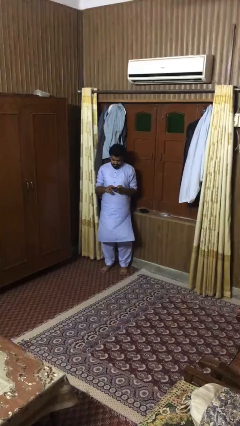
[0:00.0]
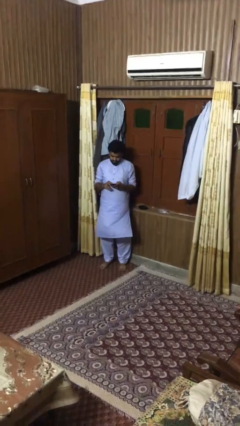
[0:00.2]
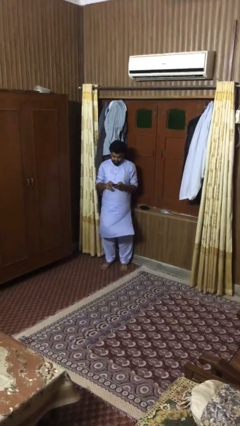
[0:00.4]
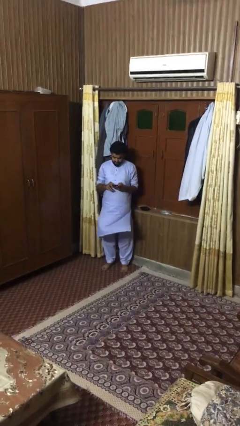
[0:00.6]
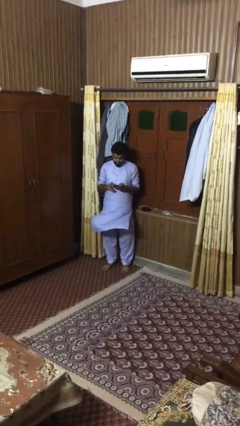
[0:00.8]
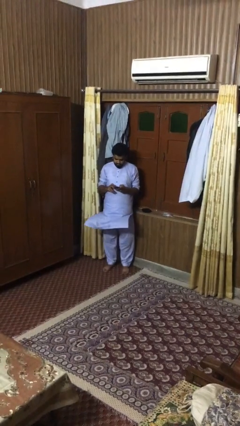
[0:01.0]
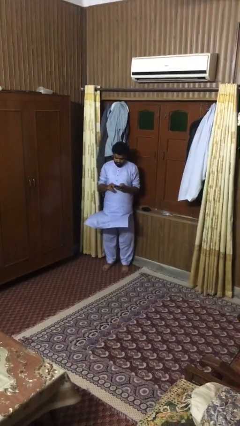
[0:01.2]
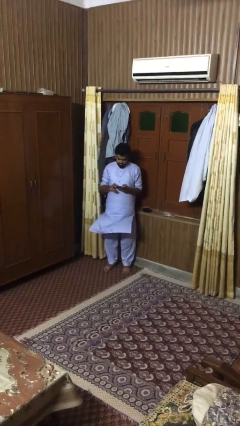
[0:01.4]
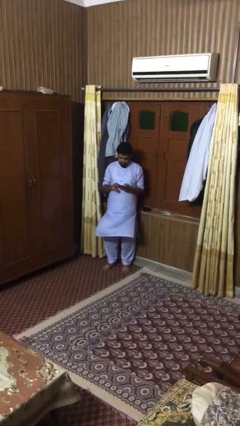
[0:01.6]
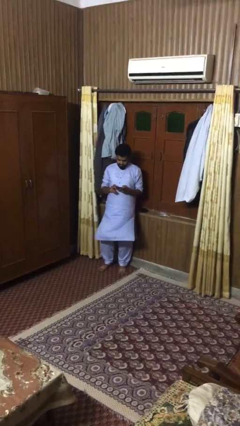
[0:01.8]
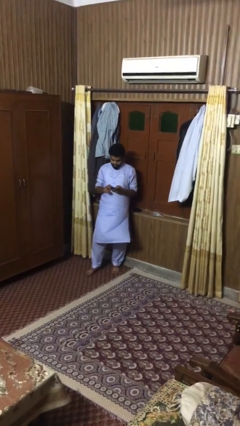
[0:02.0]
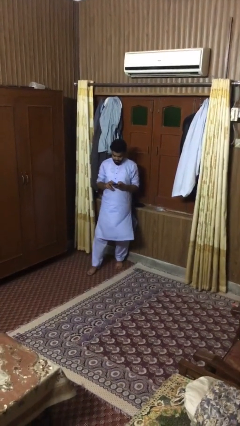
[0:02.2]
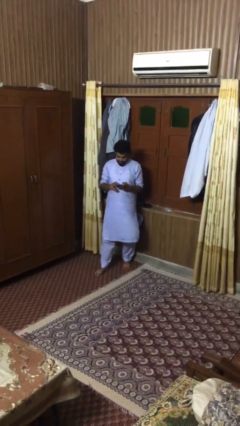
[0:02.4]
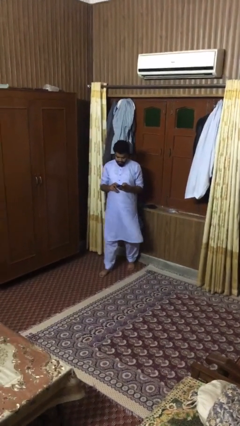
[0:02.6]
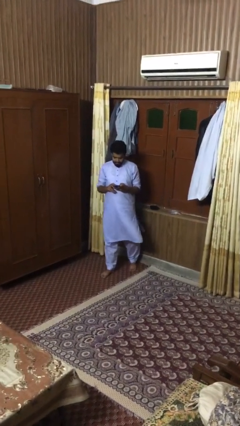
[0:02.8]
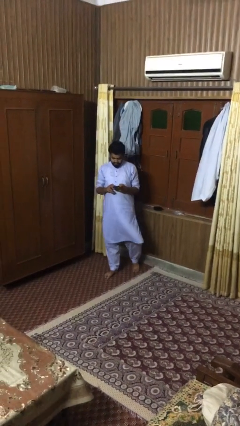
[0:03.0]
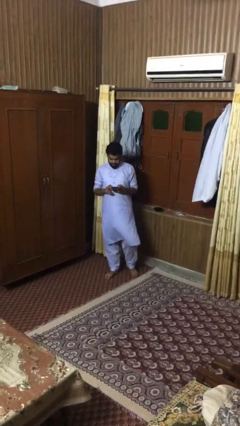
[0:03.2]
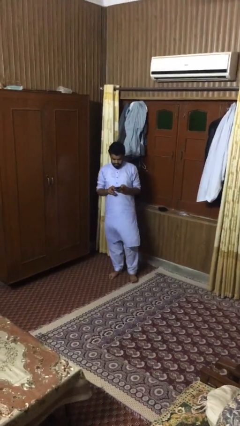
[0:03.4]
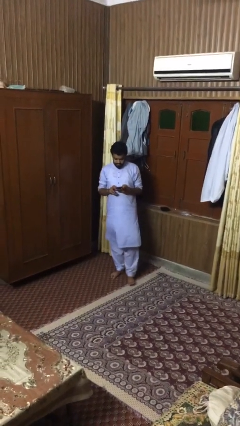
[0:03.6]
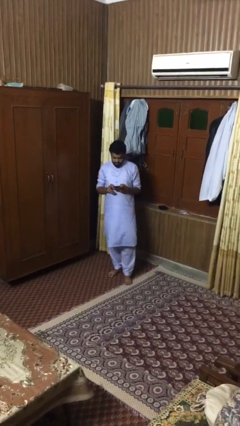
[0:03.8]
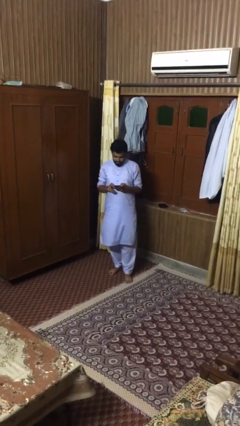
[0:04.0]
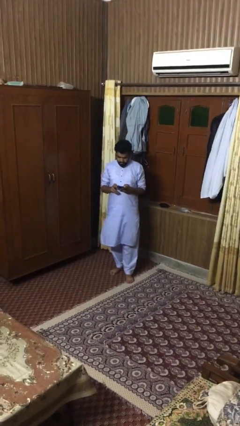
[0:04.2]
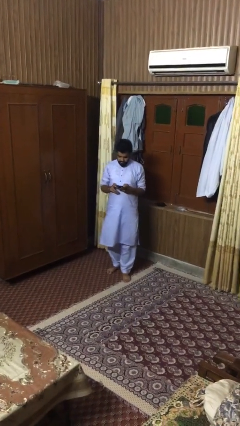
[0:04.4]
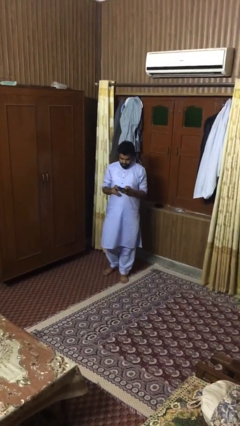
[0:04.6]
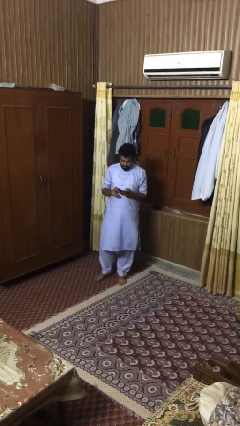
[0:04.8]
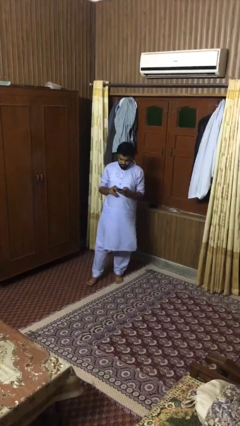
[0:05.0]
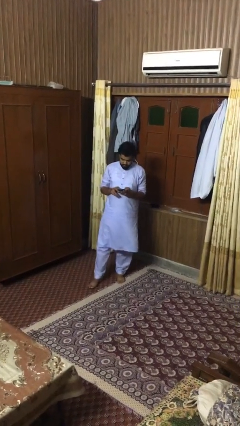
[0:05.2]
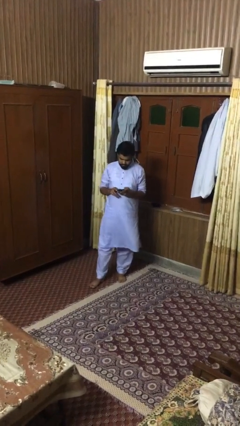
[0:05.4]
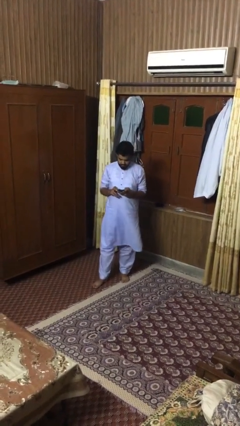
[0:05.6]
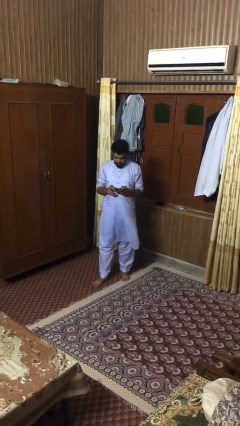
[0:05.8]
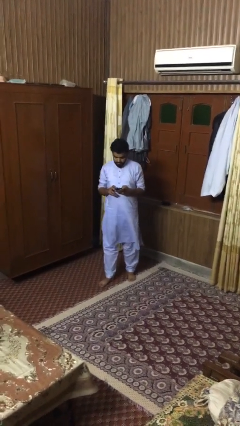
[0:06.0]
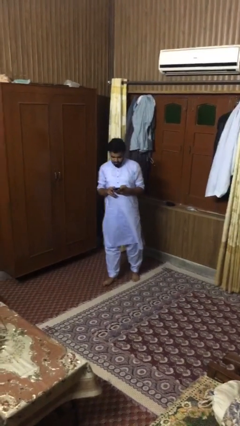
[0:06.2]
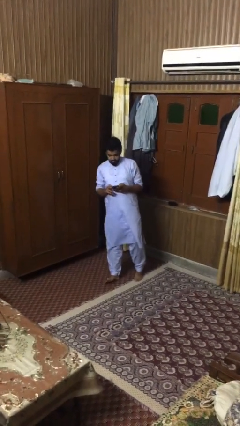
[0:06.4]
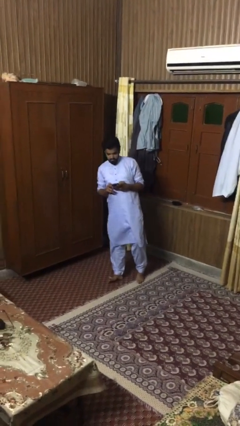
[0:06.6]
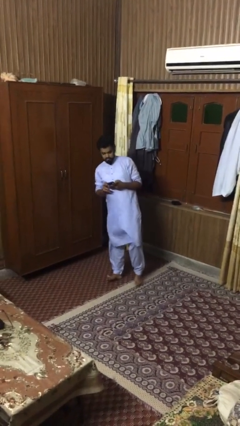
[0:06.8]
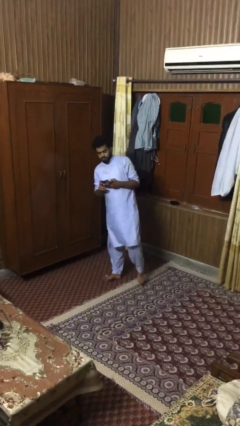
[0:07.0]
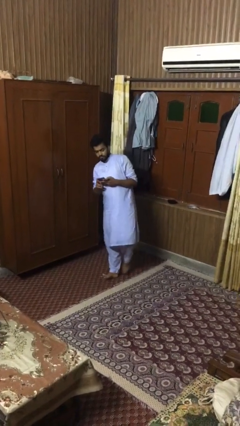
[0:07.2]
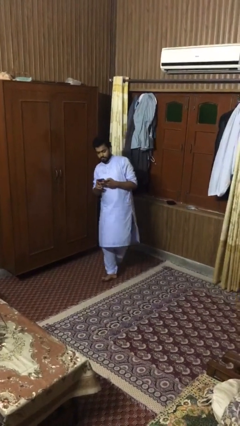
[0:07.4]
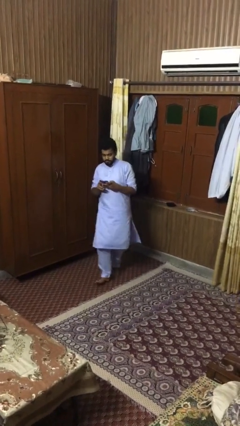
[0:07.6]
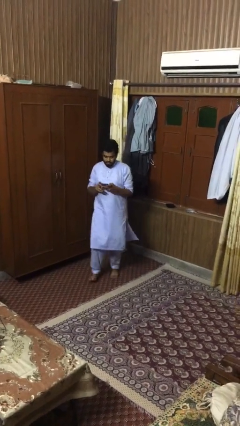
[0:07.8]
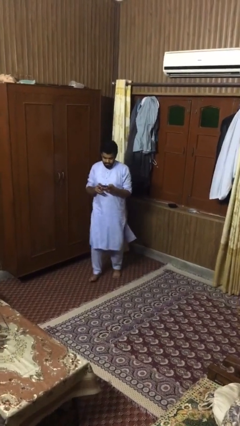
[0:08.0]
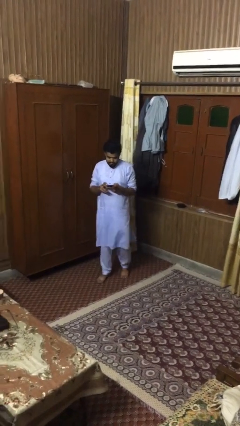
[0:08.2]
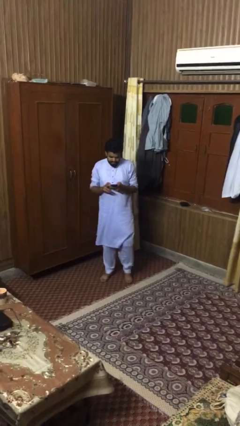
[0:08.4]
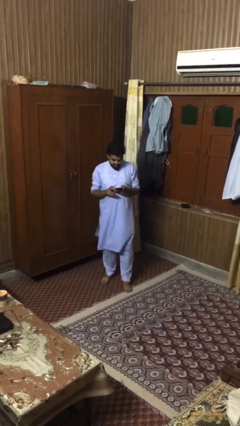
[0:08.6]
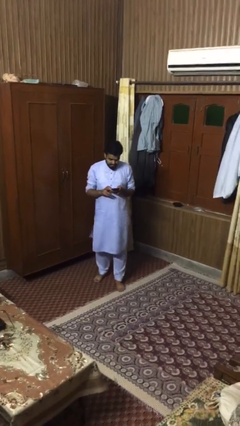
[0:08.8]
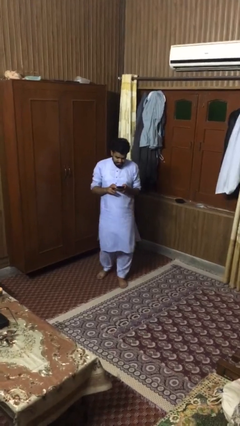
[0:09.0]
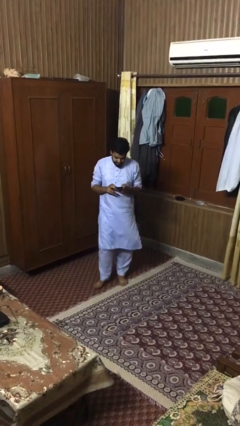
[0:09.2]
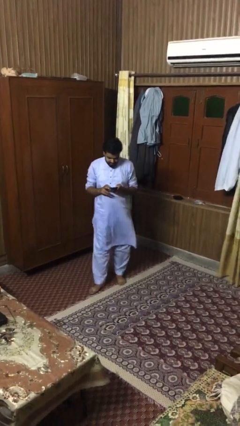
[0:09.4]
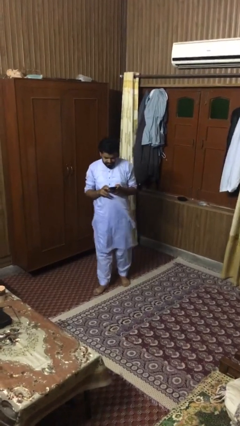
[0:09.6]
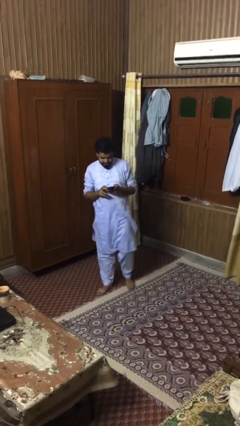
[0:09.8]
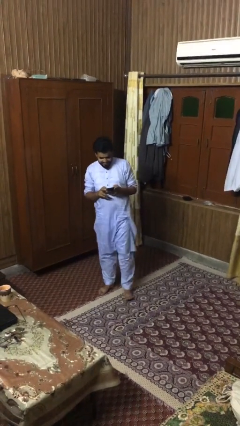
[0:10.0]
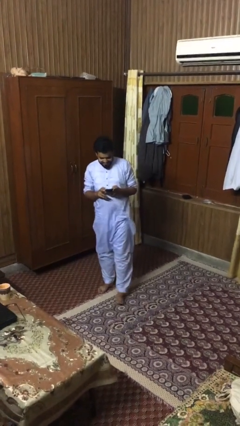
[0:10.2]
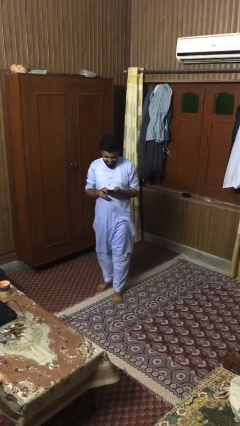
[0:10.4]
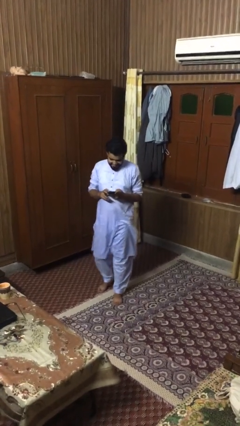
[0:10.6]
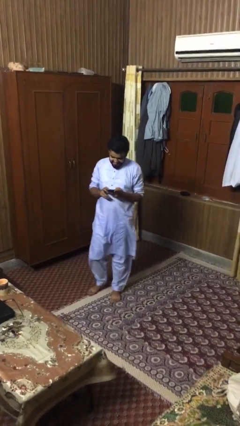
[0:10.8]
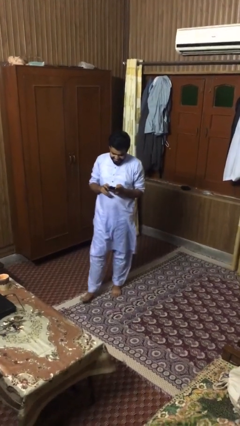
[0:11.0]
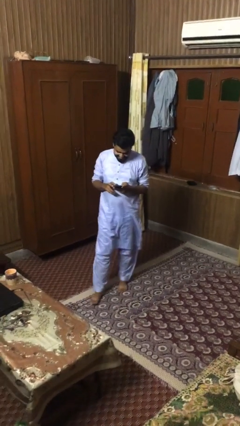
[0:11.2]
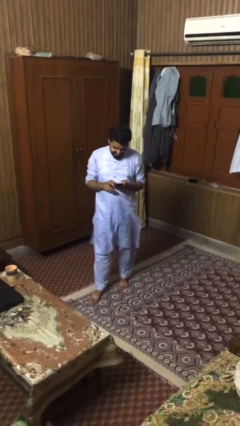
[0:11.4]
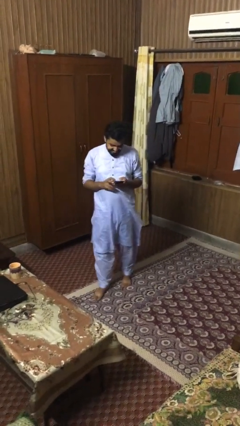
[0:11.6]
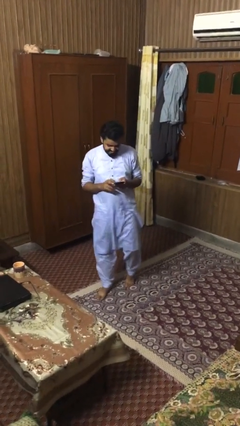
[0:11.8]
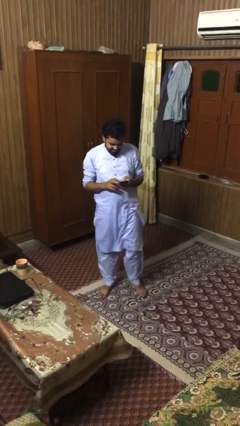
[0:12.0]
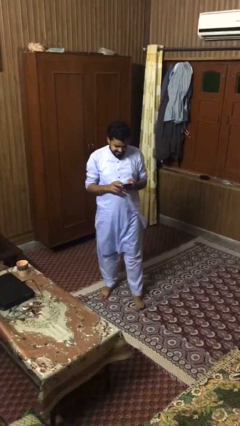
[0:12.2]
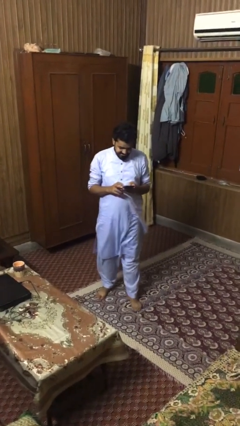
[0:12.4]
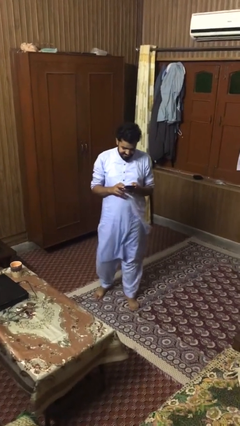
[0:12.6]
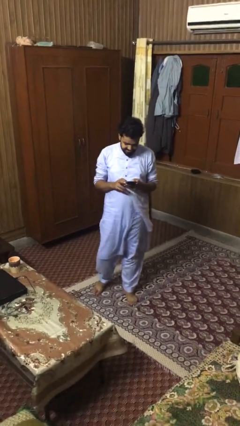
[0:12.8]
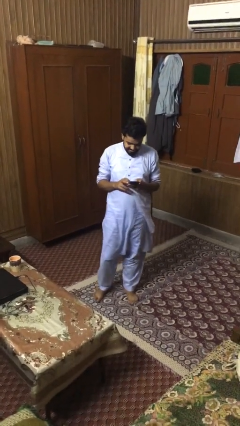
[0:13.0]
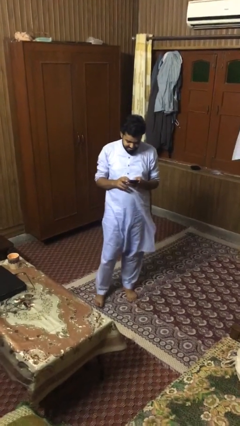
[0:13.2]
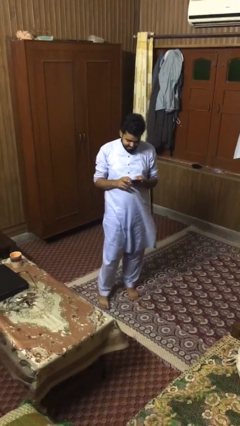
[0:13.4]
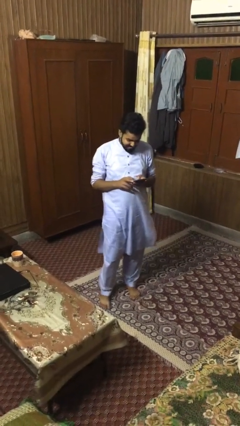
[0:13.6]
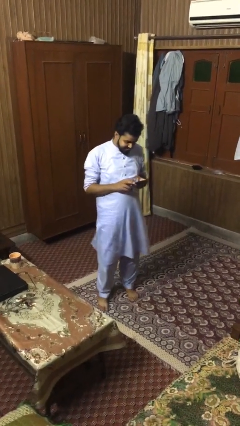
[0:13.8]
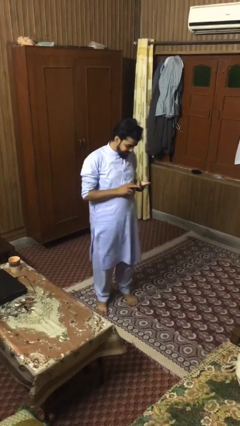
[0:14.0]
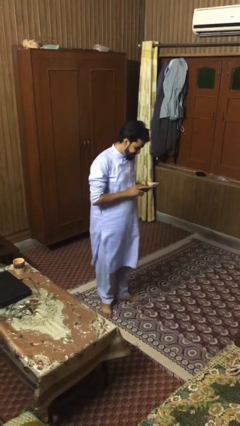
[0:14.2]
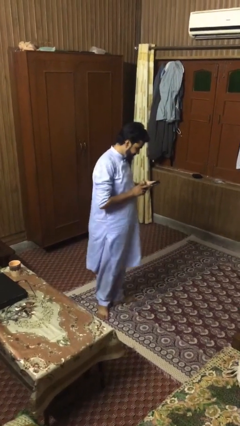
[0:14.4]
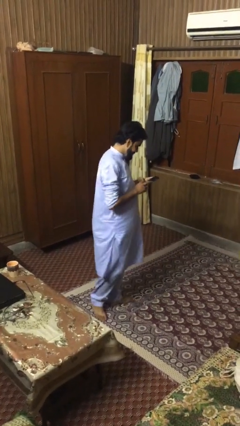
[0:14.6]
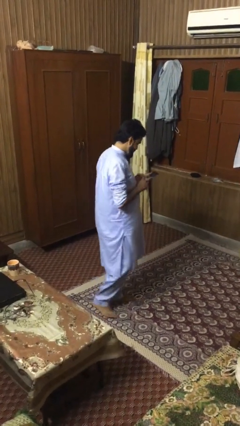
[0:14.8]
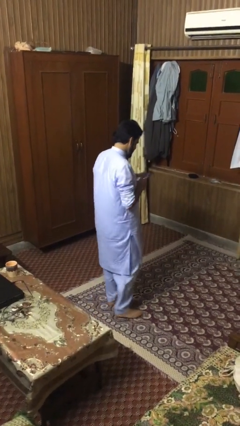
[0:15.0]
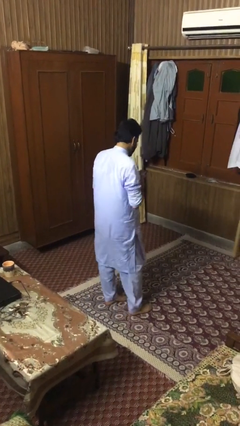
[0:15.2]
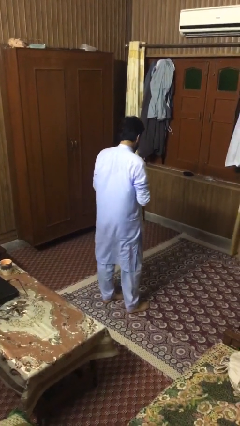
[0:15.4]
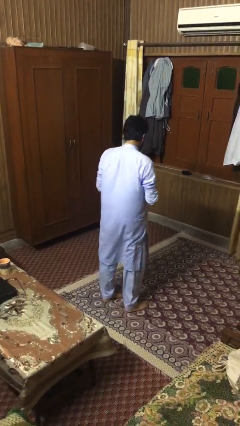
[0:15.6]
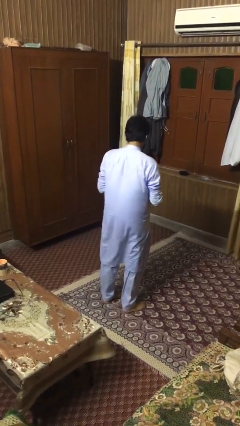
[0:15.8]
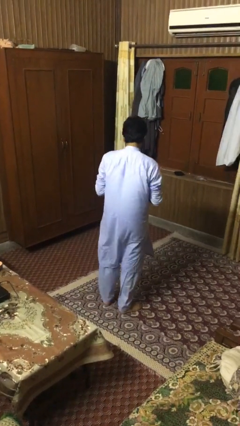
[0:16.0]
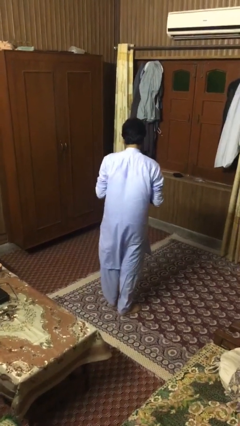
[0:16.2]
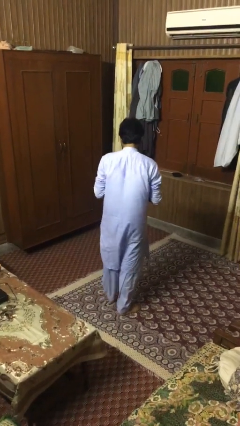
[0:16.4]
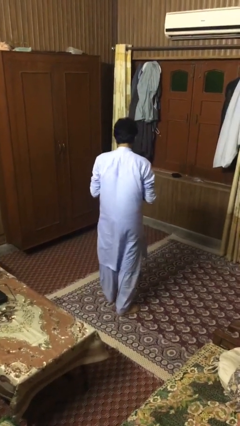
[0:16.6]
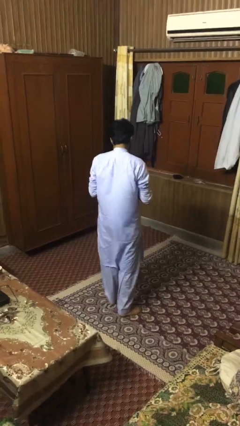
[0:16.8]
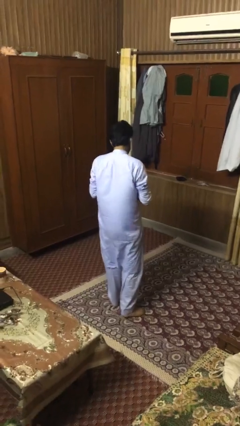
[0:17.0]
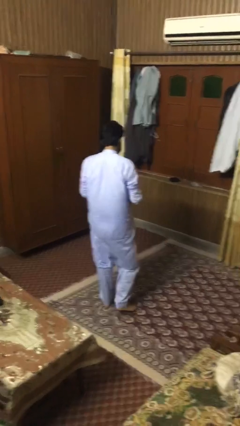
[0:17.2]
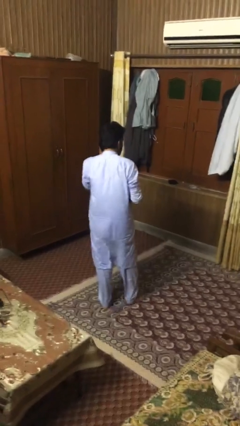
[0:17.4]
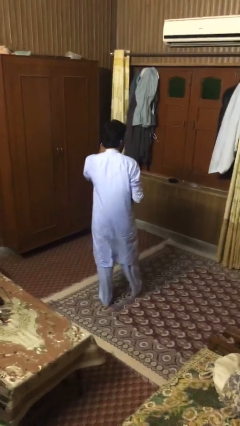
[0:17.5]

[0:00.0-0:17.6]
person texts on phone

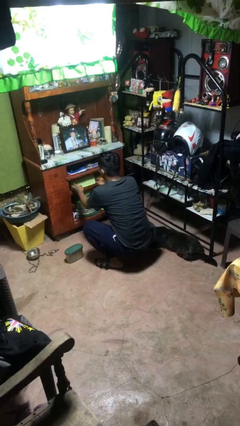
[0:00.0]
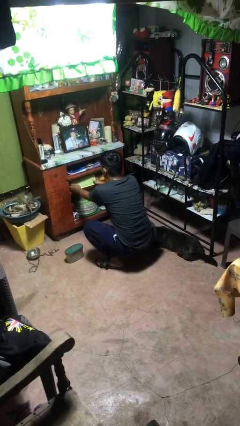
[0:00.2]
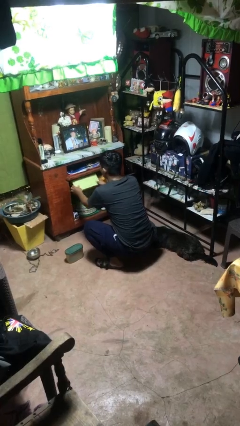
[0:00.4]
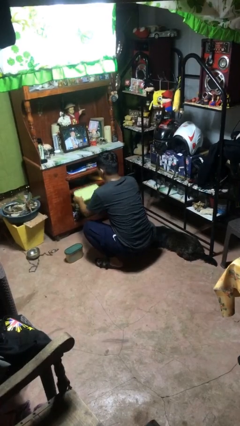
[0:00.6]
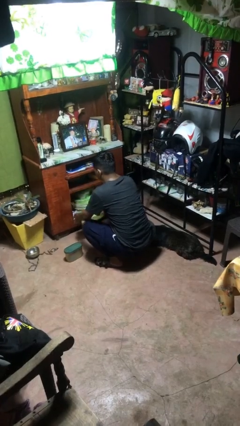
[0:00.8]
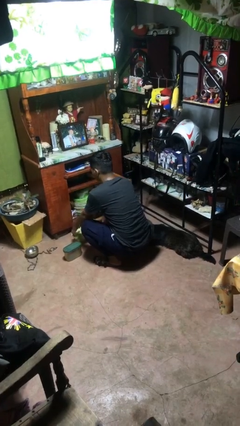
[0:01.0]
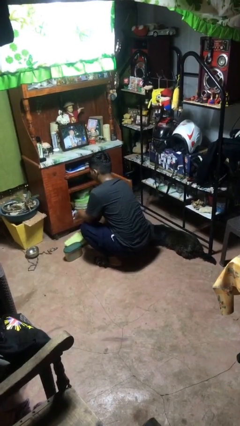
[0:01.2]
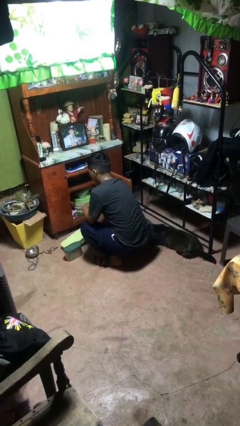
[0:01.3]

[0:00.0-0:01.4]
person takes object from cabinet
